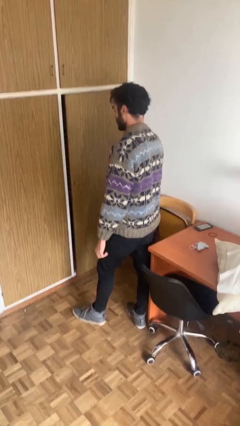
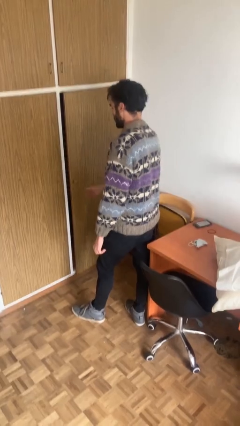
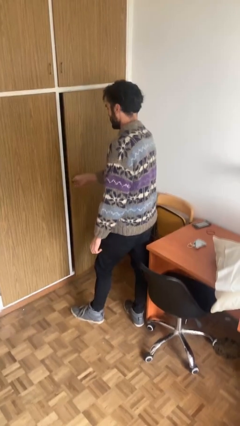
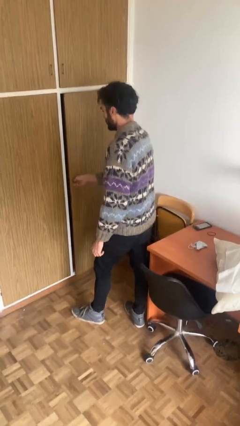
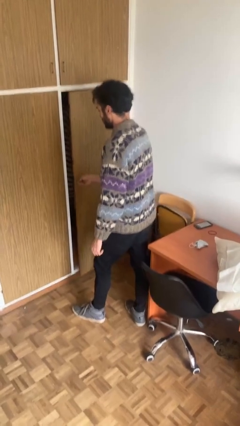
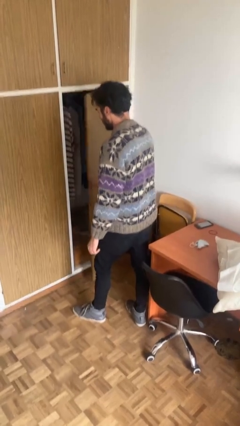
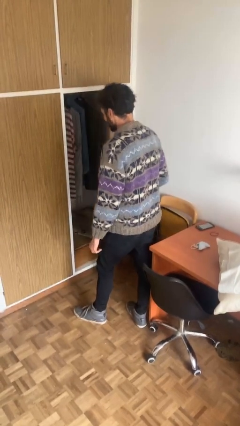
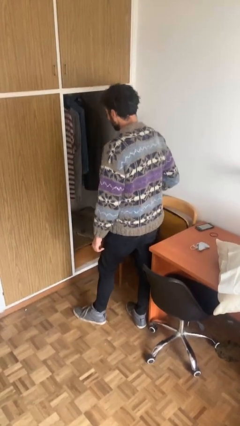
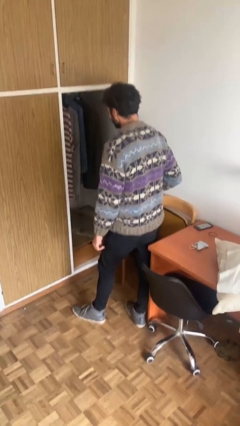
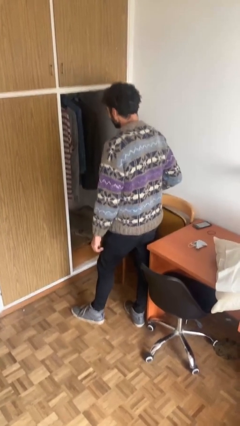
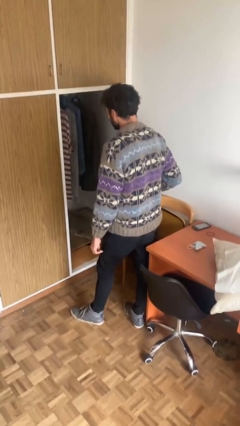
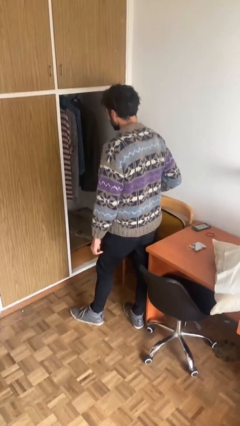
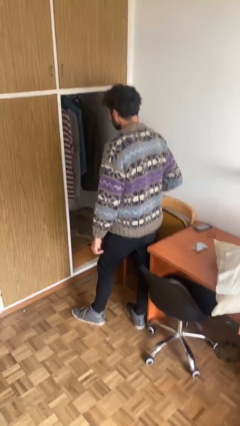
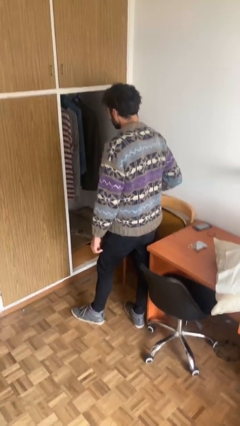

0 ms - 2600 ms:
person opens closet door

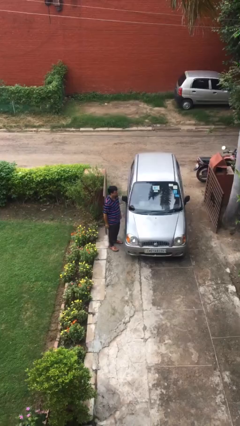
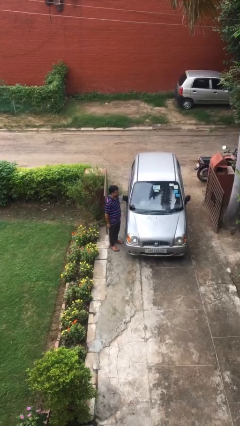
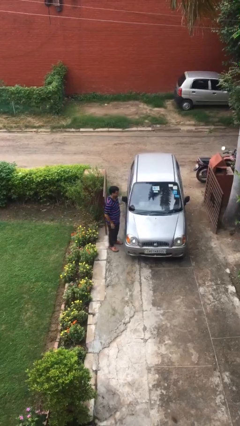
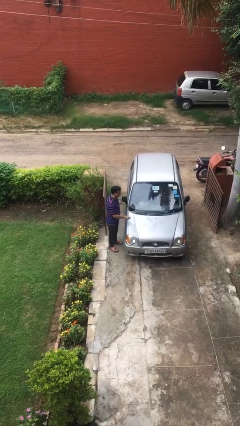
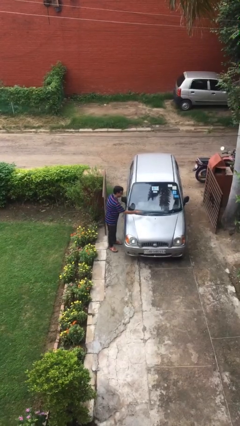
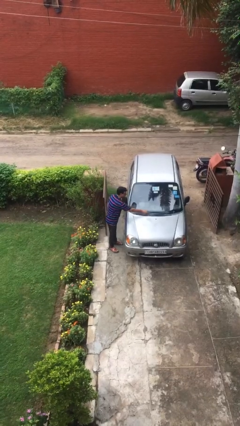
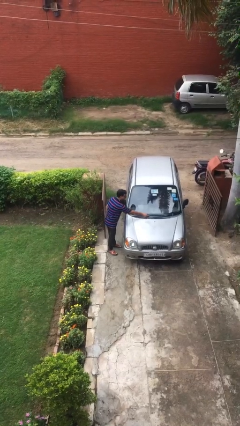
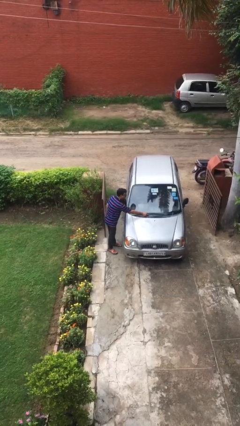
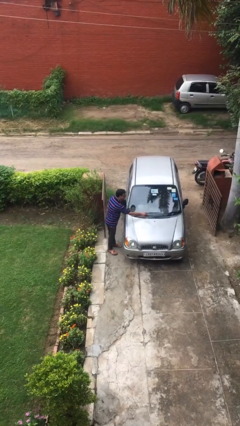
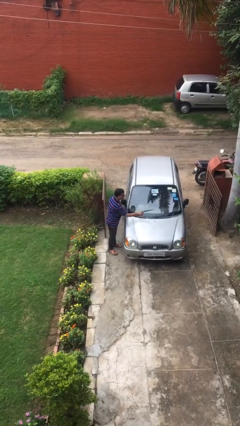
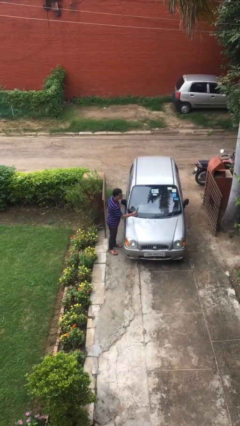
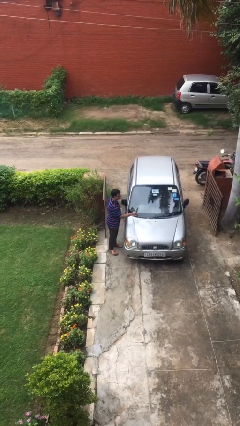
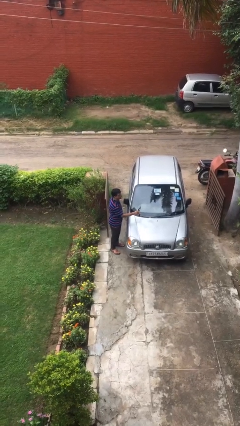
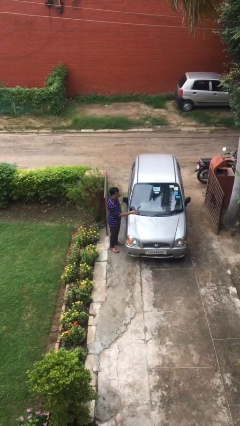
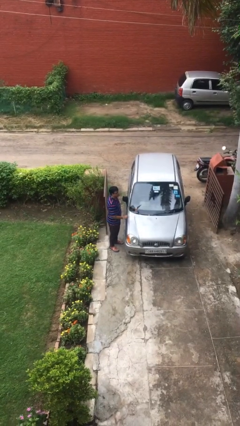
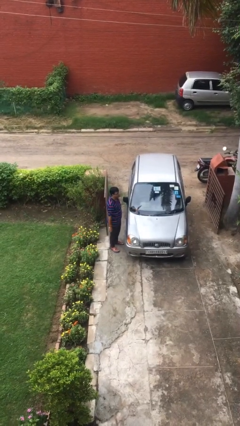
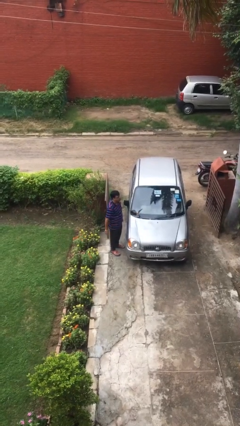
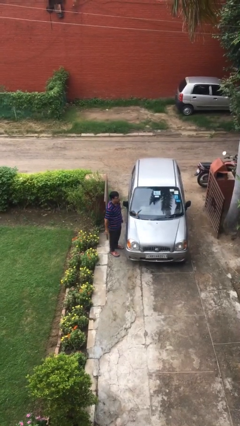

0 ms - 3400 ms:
person flips up car wipers

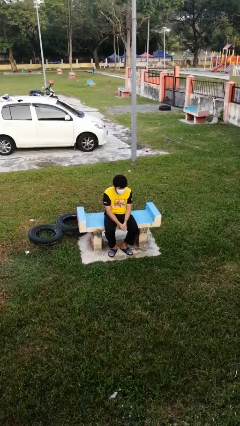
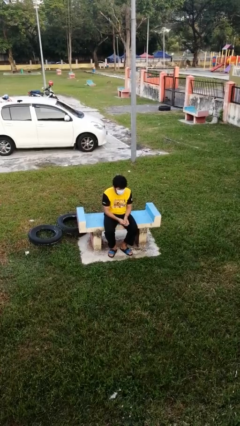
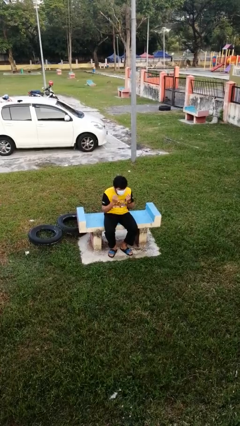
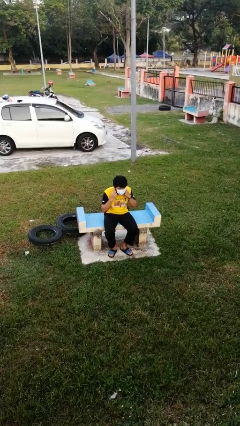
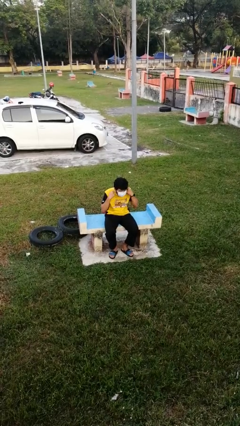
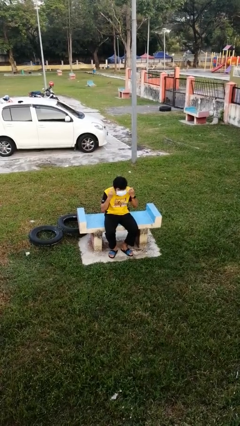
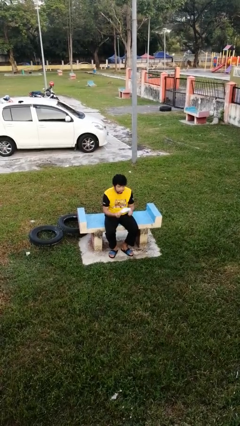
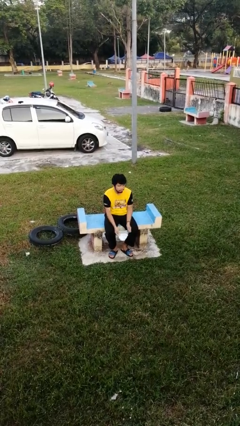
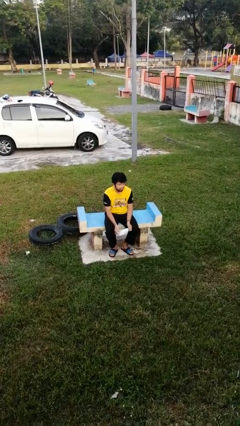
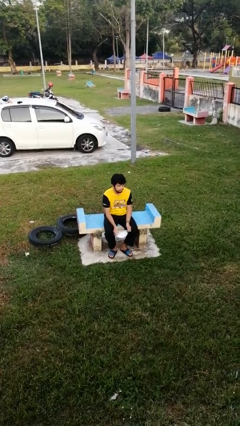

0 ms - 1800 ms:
person takes off facemask

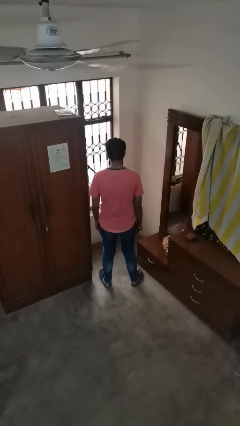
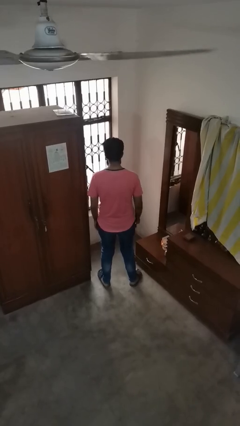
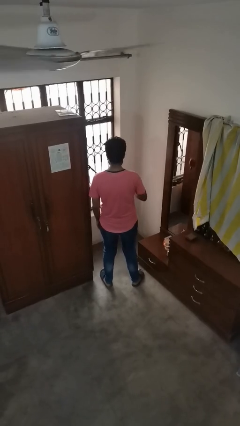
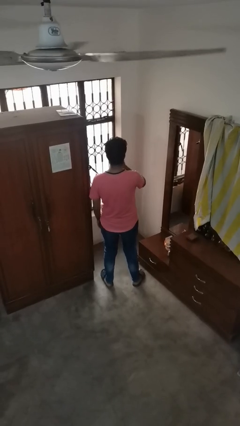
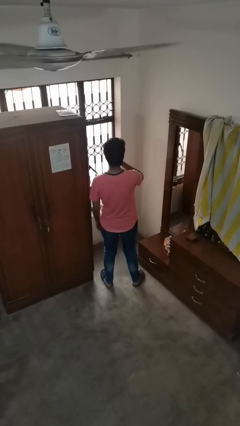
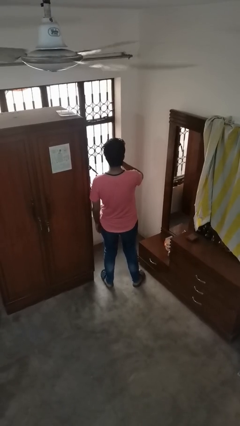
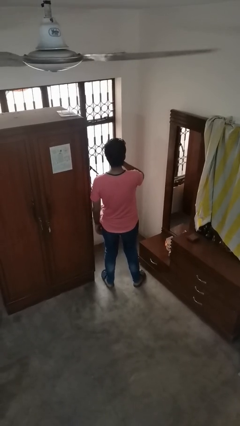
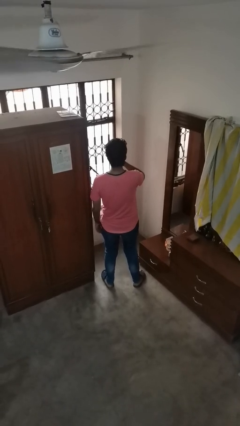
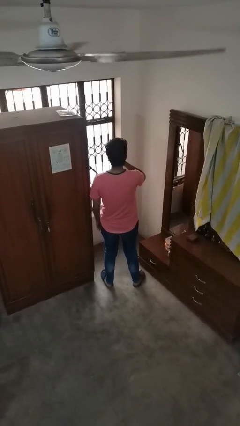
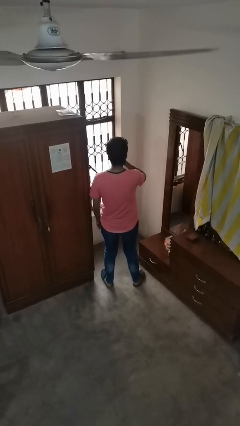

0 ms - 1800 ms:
person vapes

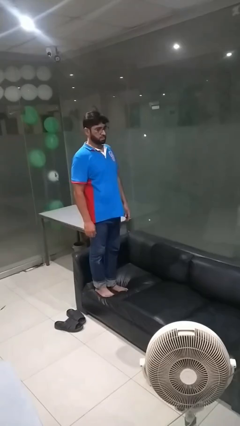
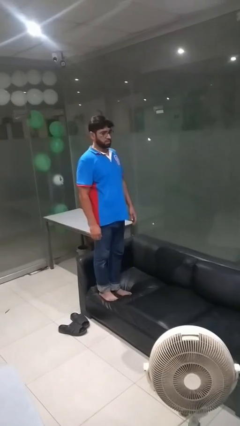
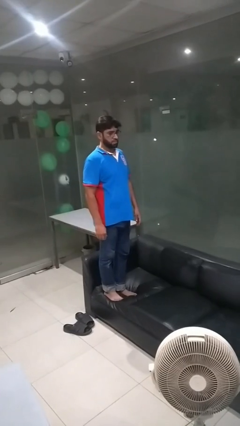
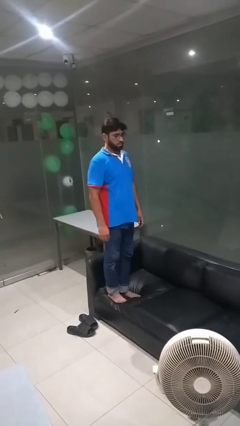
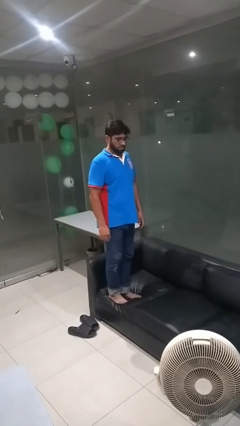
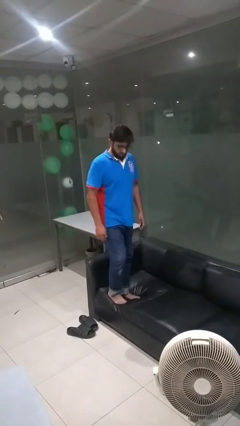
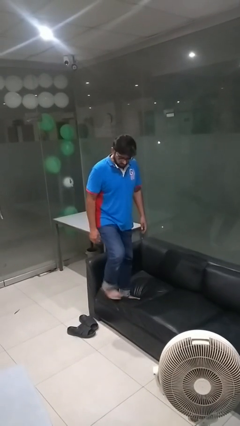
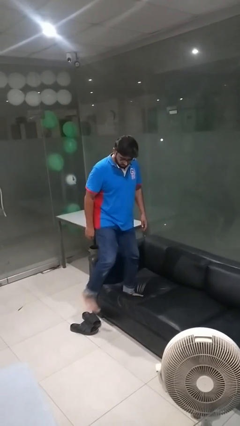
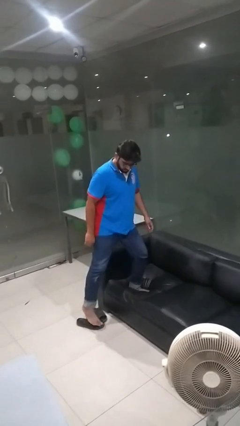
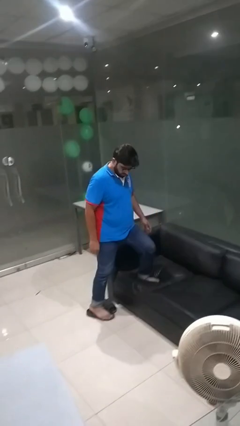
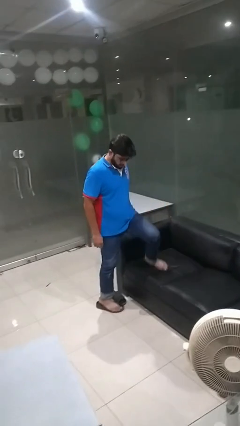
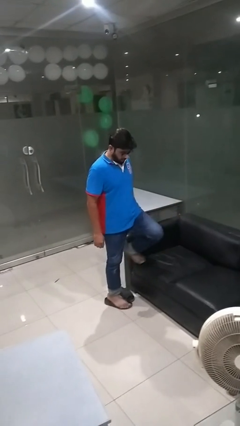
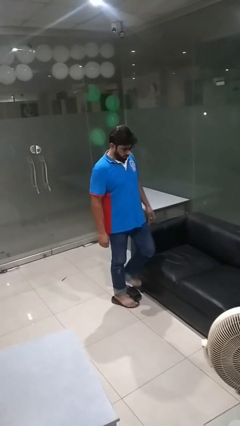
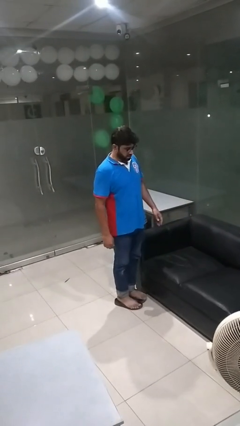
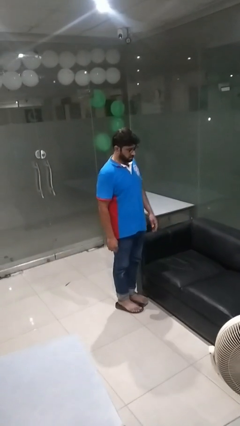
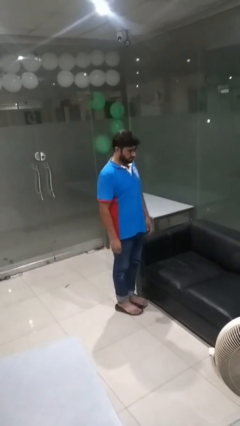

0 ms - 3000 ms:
person climbs off couch

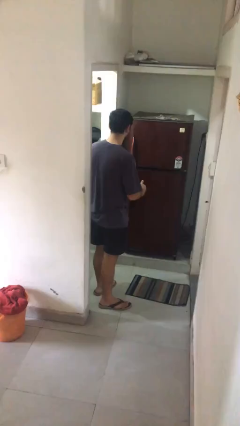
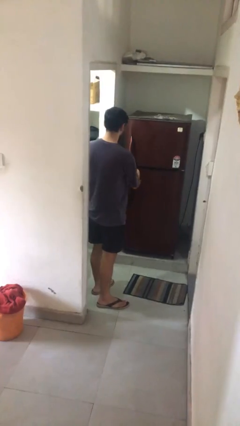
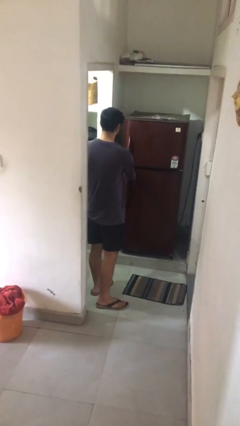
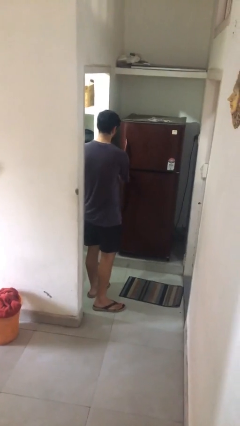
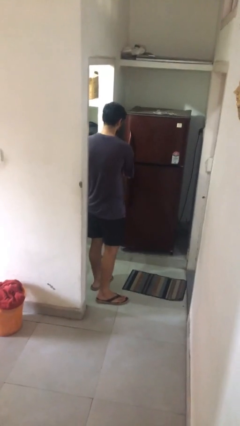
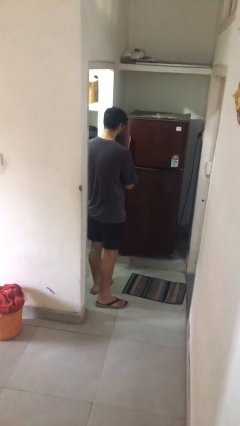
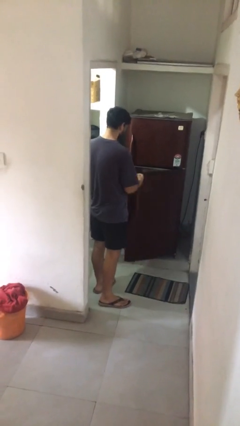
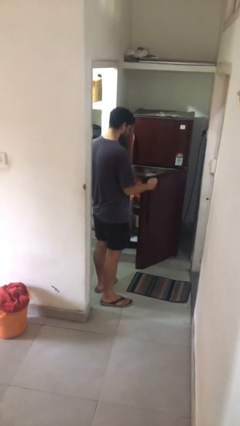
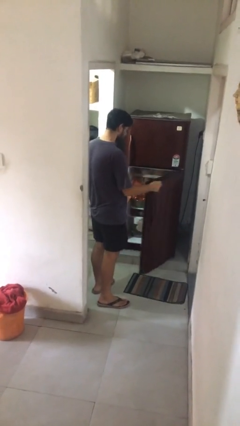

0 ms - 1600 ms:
person opens refrigerator

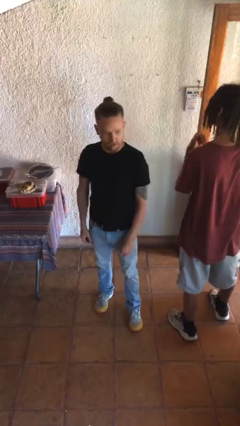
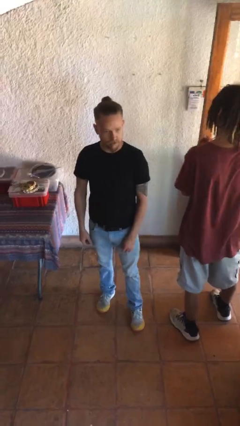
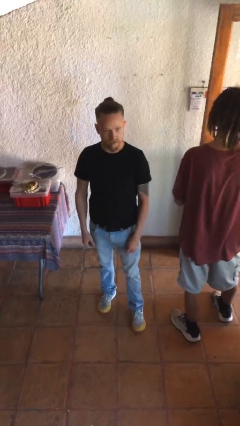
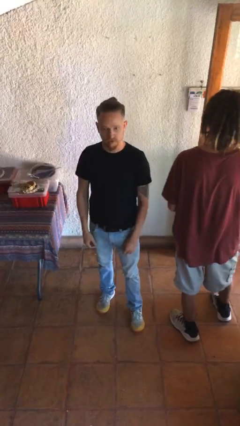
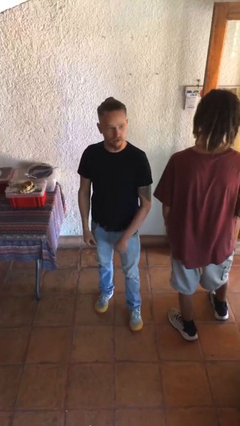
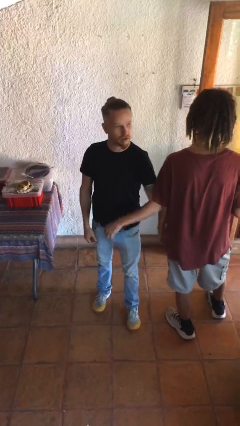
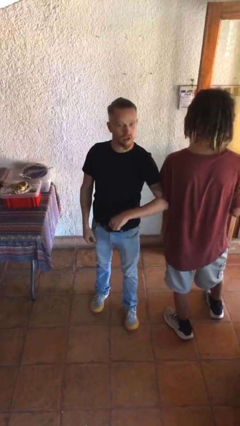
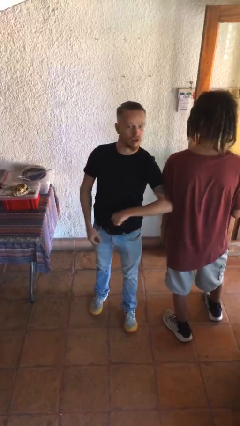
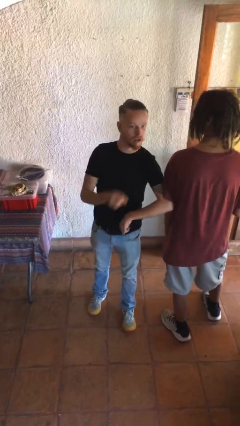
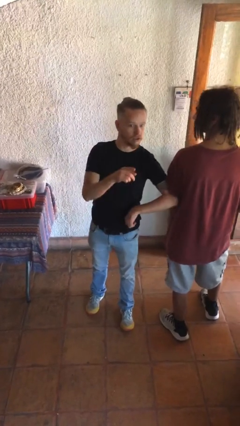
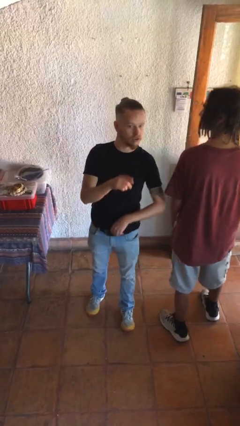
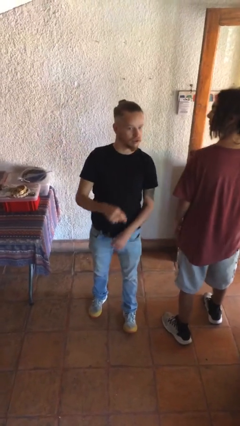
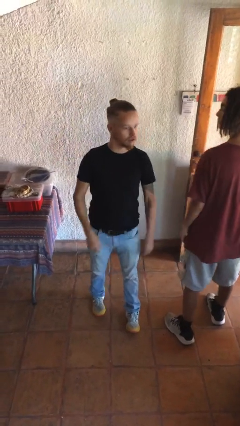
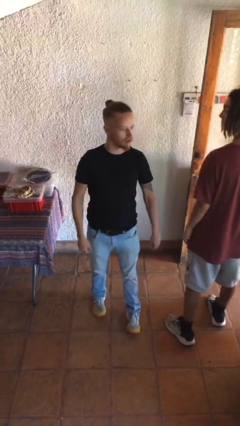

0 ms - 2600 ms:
person nudges person with elbow
